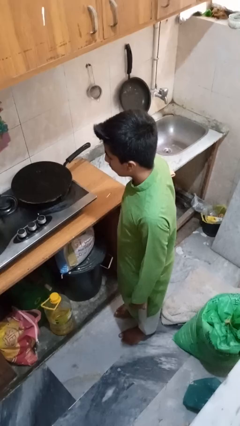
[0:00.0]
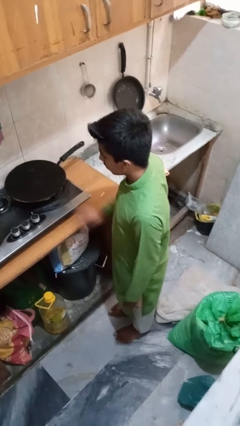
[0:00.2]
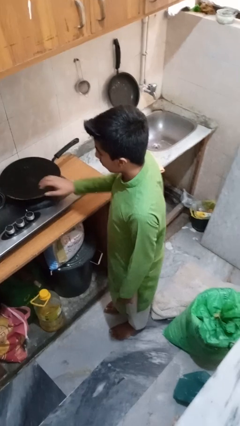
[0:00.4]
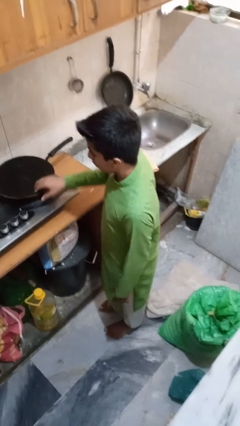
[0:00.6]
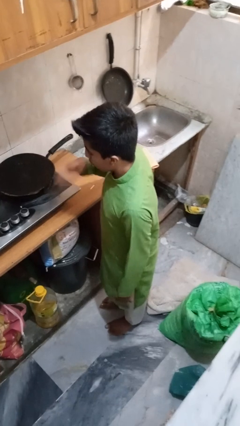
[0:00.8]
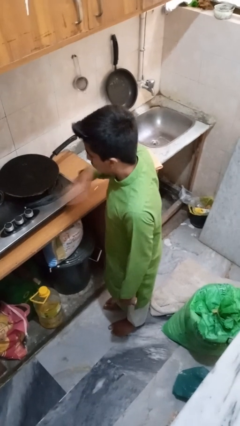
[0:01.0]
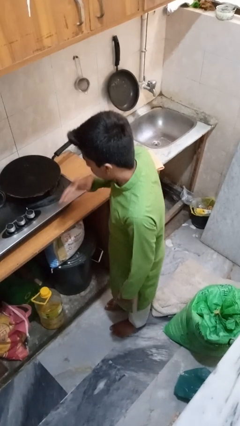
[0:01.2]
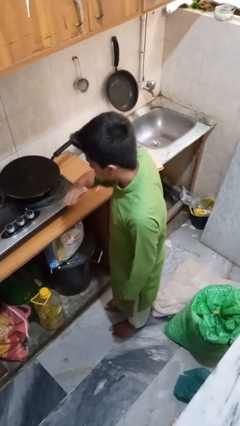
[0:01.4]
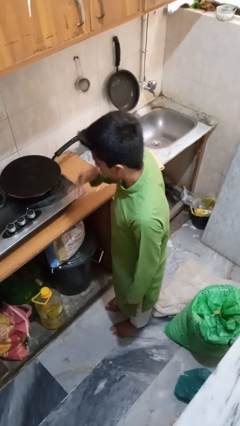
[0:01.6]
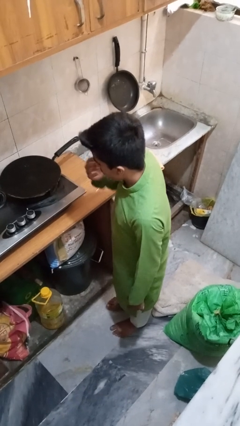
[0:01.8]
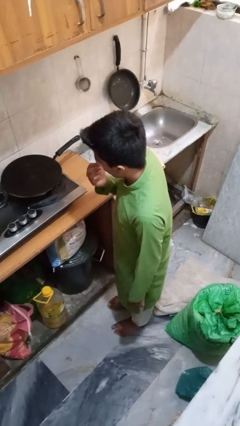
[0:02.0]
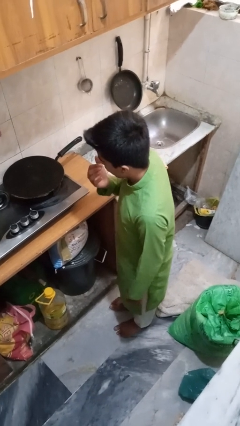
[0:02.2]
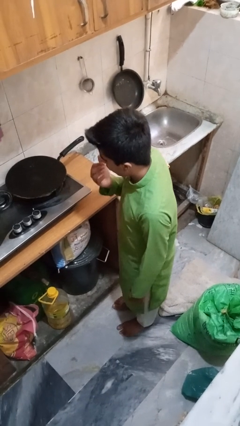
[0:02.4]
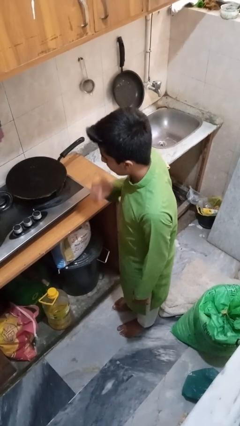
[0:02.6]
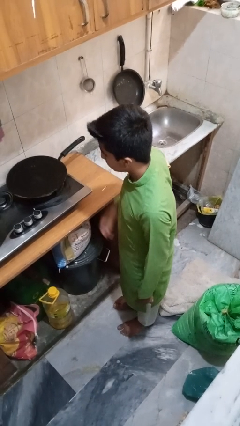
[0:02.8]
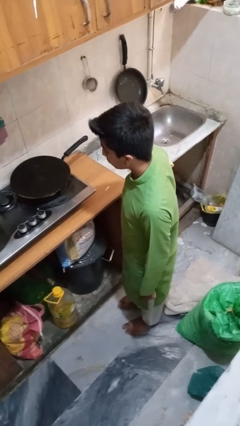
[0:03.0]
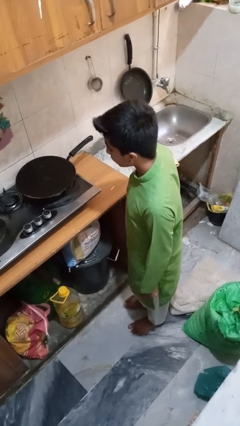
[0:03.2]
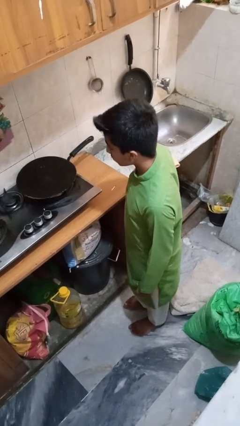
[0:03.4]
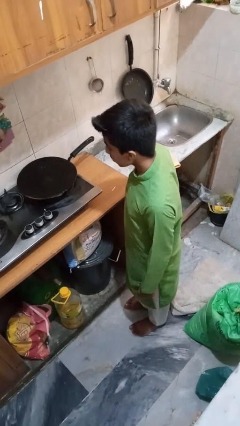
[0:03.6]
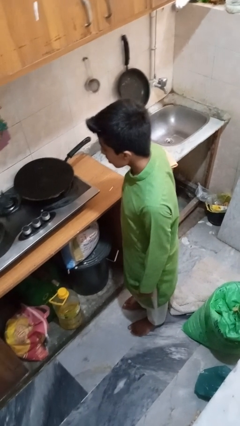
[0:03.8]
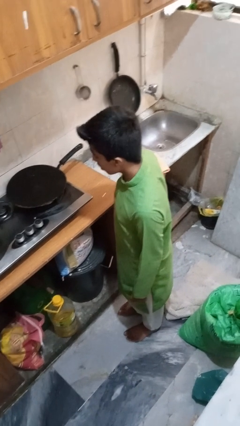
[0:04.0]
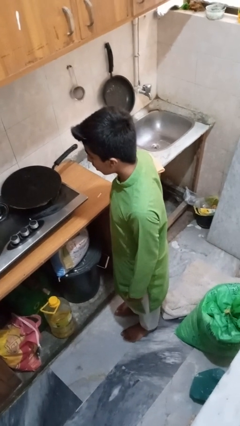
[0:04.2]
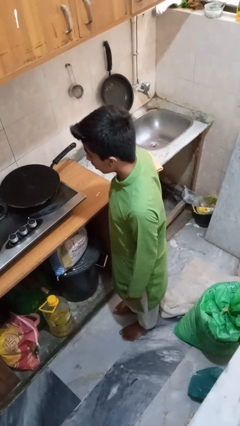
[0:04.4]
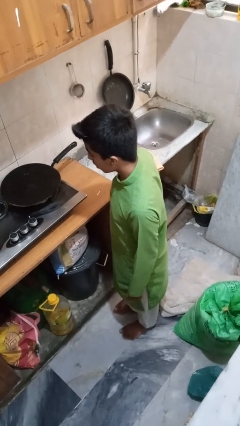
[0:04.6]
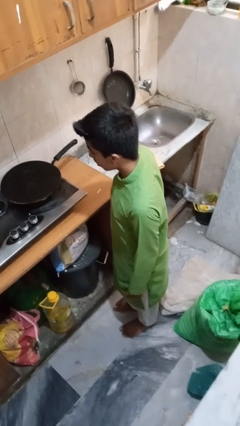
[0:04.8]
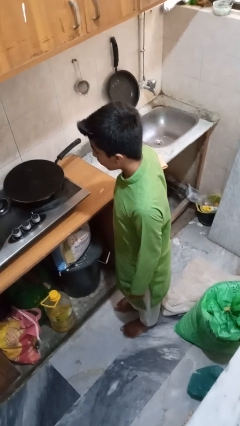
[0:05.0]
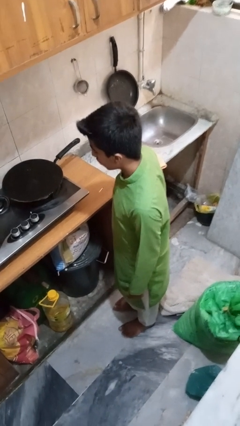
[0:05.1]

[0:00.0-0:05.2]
person burns hand

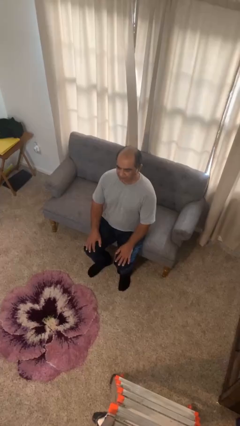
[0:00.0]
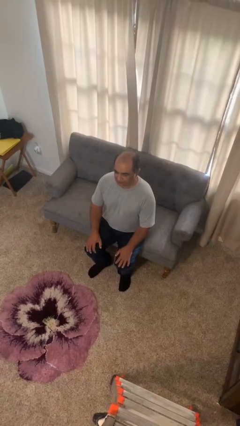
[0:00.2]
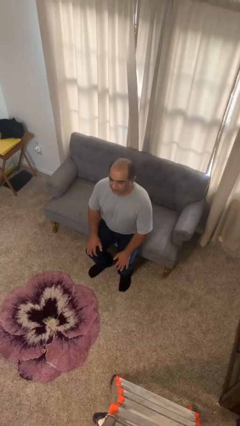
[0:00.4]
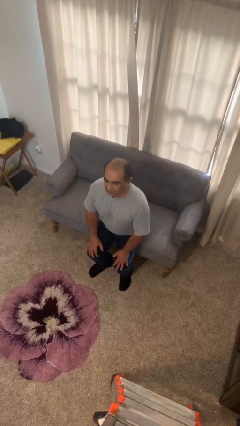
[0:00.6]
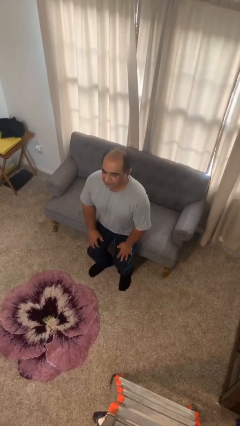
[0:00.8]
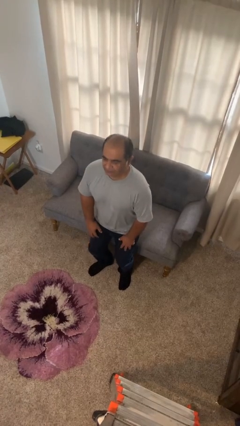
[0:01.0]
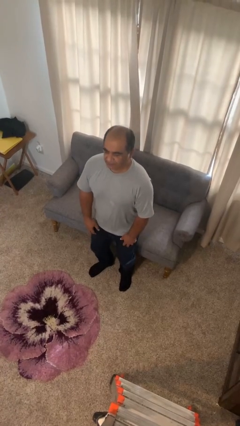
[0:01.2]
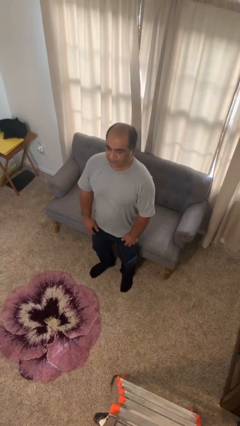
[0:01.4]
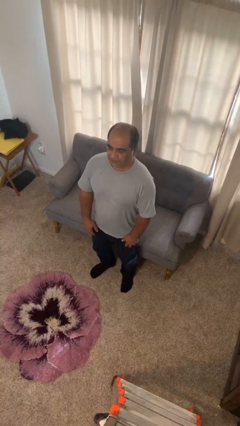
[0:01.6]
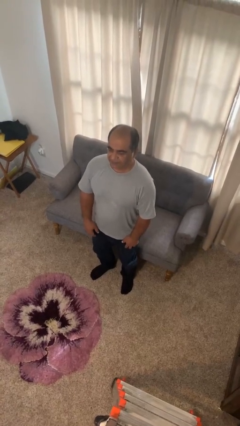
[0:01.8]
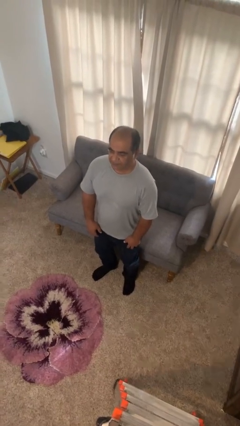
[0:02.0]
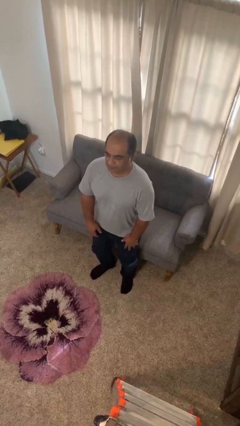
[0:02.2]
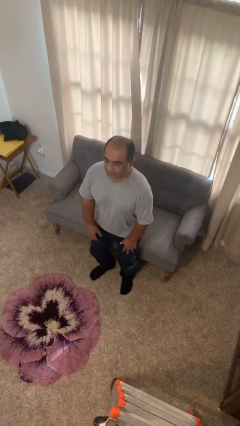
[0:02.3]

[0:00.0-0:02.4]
person stands up

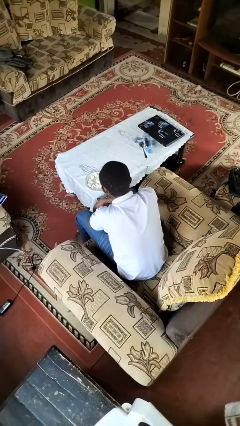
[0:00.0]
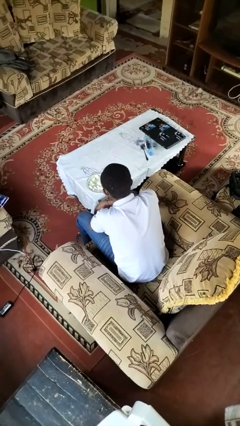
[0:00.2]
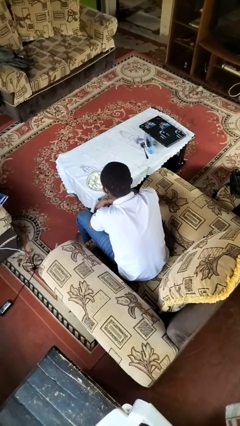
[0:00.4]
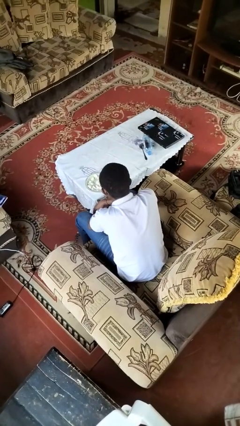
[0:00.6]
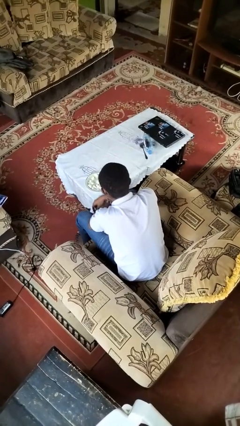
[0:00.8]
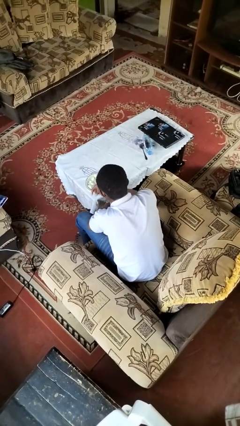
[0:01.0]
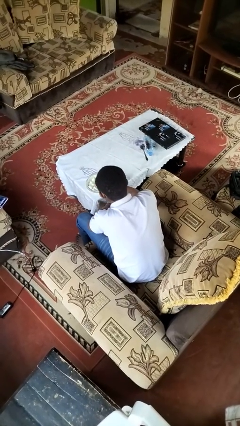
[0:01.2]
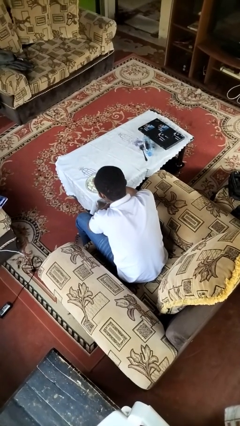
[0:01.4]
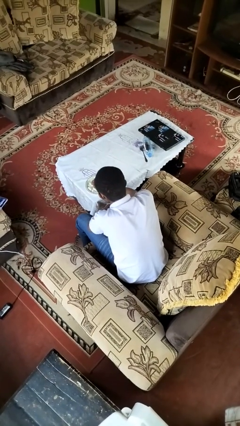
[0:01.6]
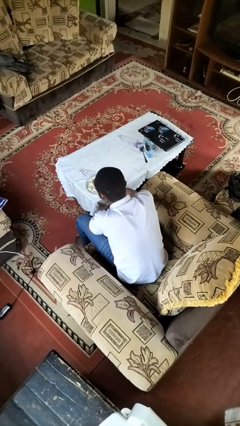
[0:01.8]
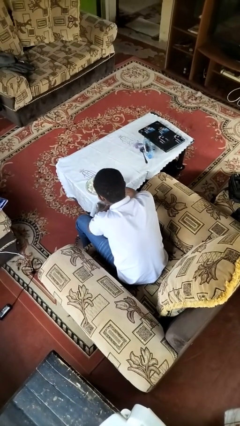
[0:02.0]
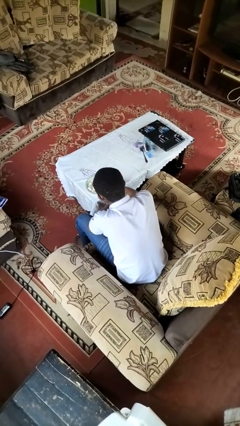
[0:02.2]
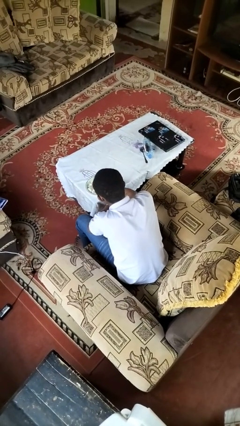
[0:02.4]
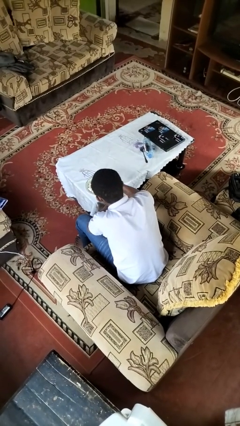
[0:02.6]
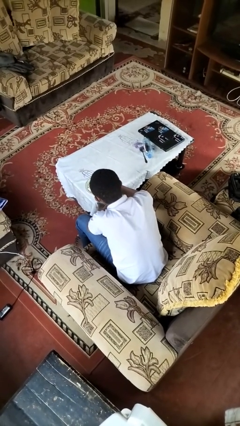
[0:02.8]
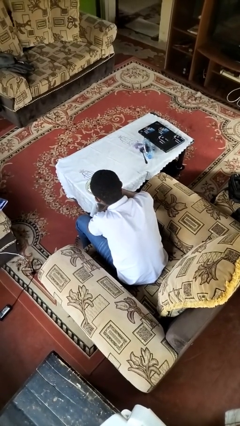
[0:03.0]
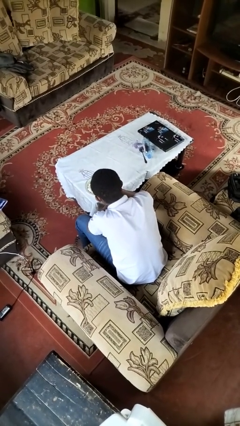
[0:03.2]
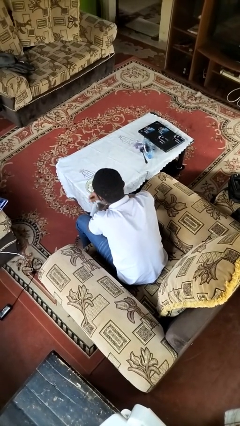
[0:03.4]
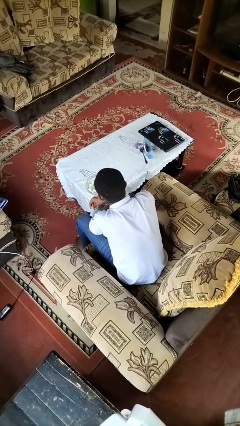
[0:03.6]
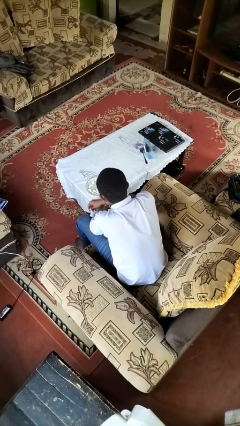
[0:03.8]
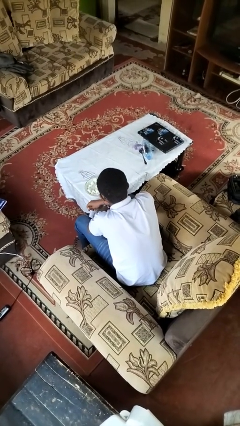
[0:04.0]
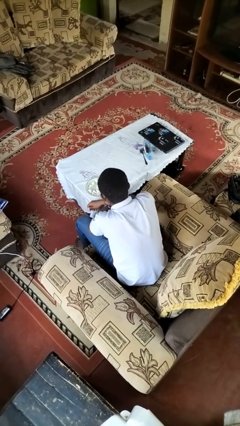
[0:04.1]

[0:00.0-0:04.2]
person eats with hands

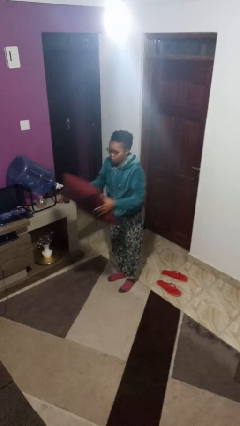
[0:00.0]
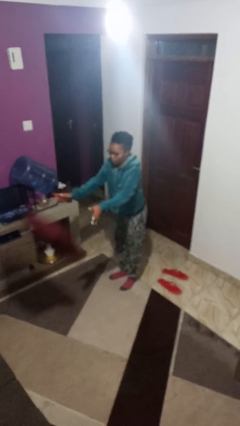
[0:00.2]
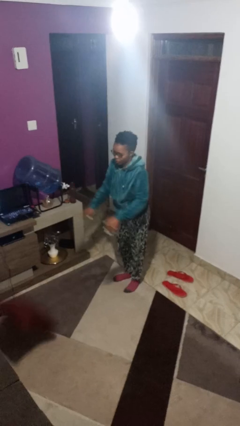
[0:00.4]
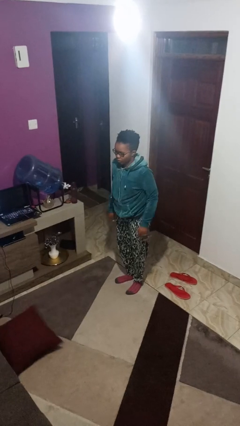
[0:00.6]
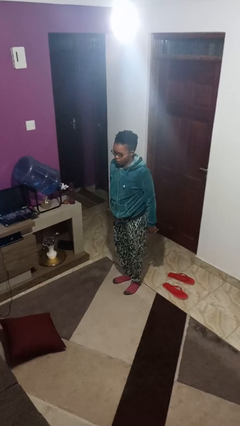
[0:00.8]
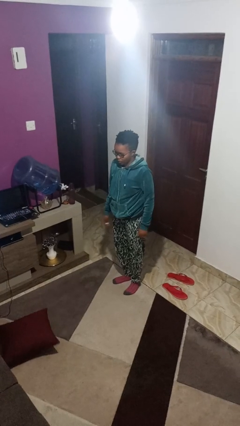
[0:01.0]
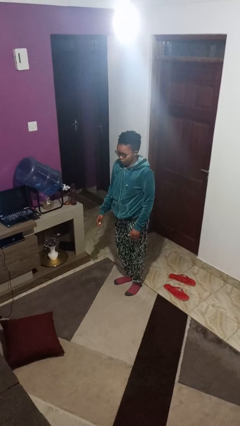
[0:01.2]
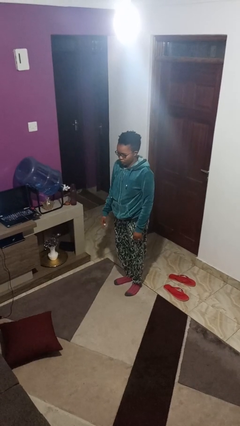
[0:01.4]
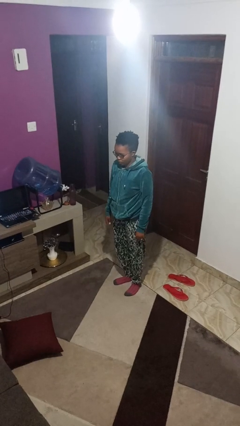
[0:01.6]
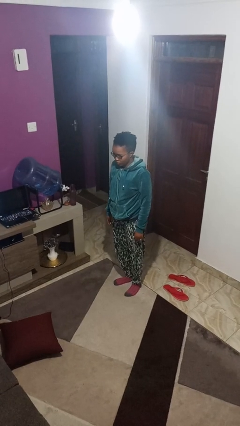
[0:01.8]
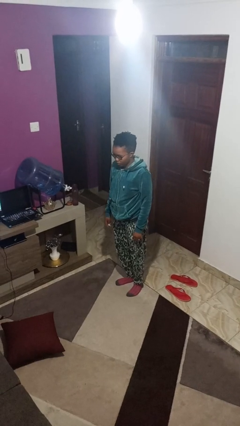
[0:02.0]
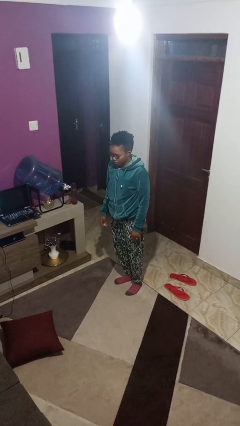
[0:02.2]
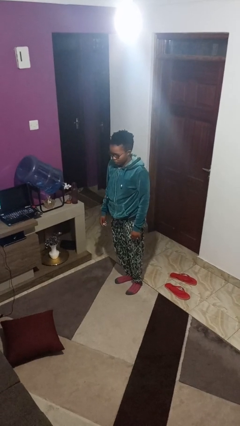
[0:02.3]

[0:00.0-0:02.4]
person throws object to ground

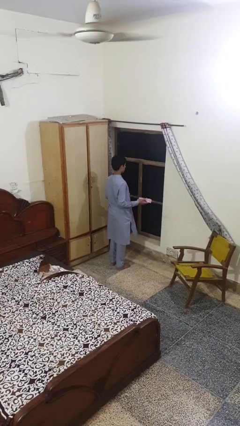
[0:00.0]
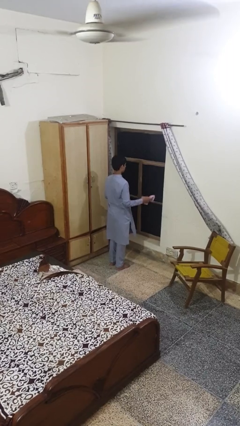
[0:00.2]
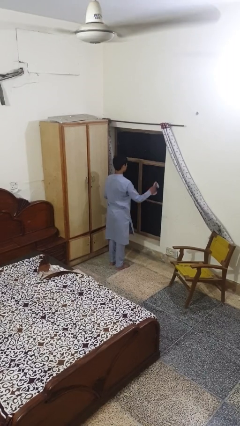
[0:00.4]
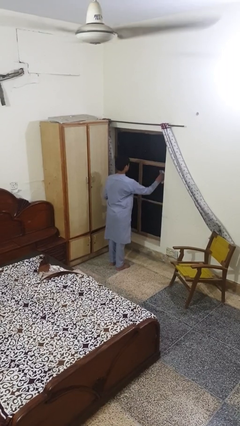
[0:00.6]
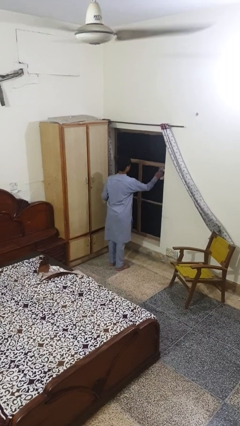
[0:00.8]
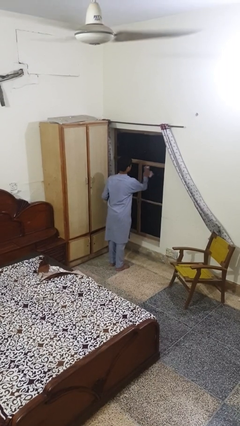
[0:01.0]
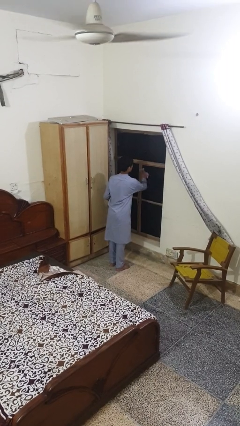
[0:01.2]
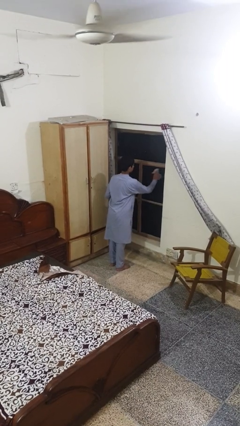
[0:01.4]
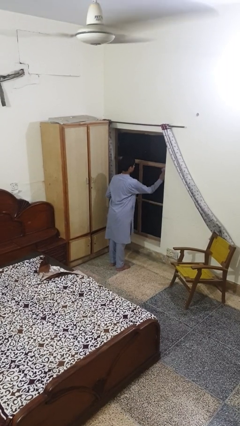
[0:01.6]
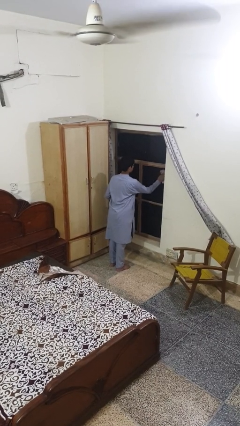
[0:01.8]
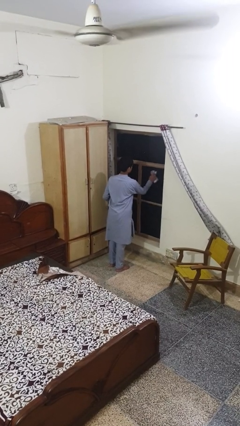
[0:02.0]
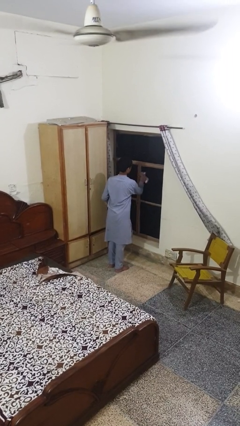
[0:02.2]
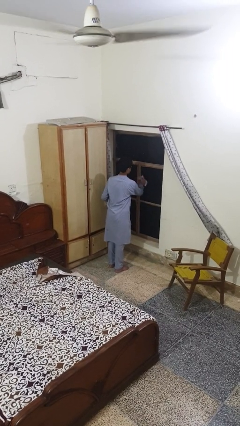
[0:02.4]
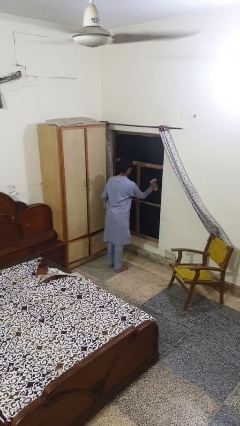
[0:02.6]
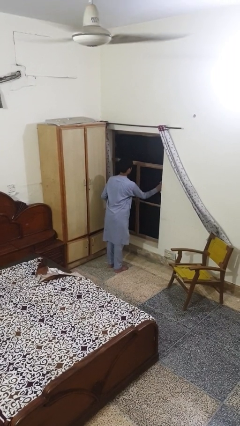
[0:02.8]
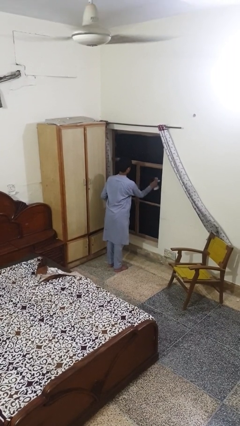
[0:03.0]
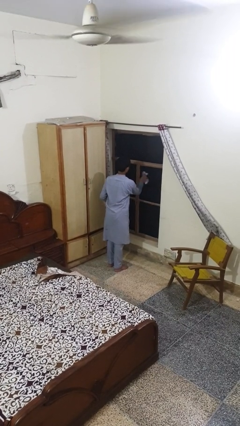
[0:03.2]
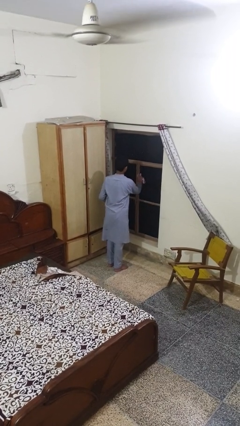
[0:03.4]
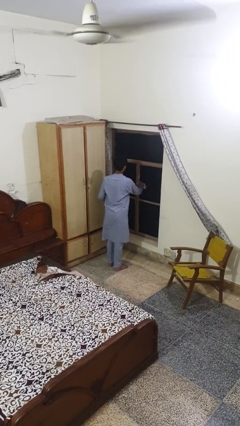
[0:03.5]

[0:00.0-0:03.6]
person washes window
